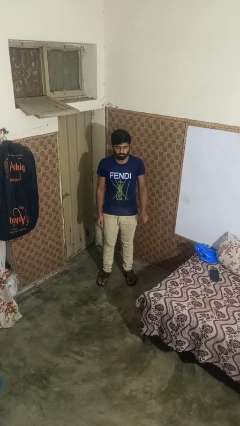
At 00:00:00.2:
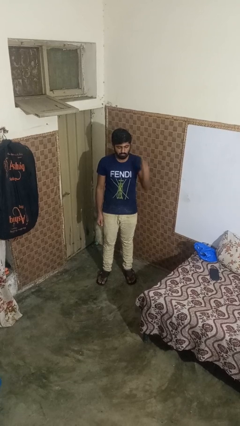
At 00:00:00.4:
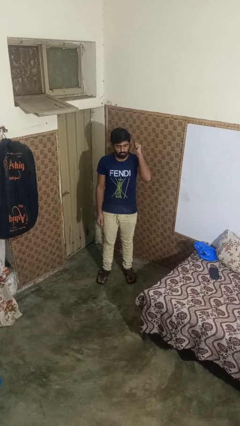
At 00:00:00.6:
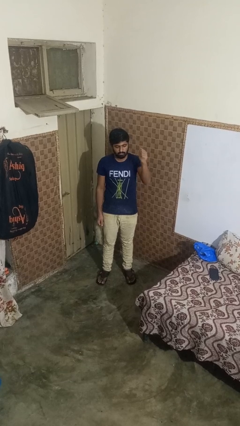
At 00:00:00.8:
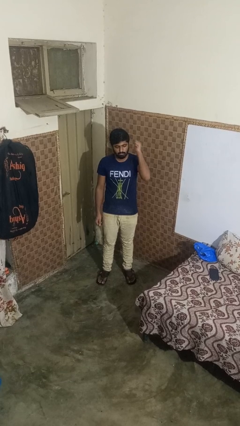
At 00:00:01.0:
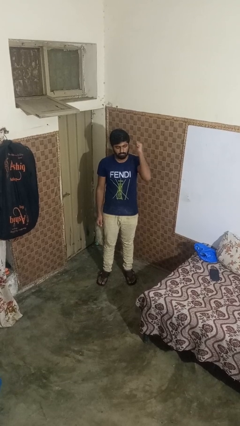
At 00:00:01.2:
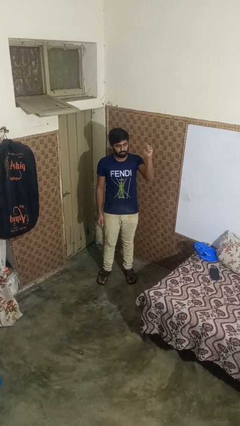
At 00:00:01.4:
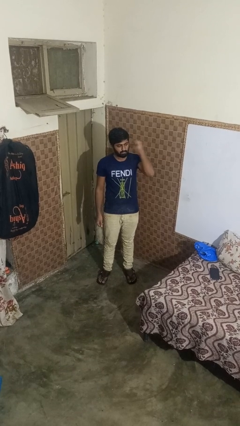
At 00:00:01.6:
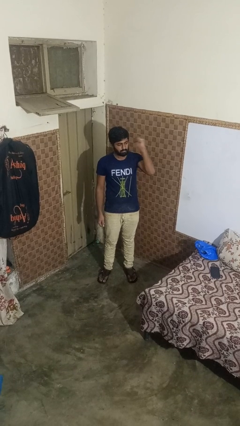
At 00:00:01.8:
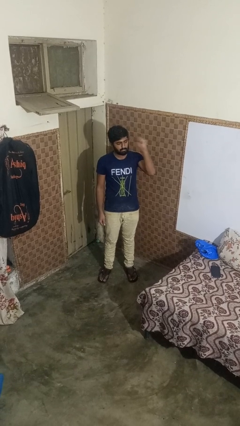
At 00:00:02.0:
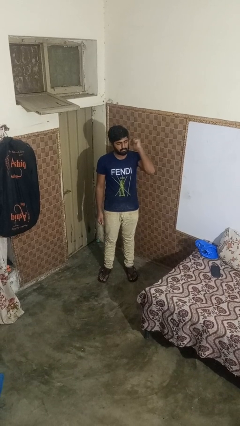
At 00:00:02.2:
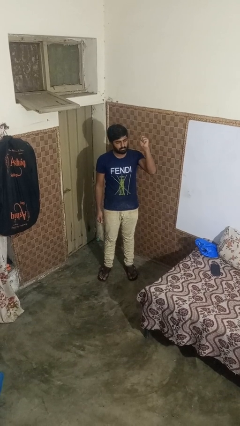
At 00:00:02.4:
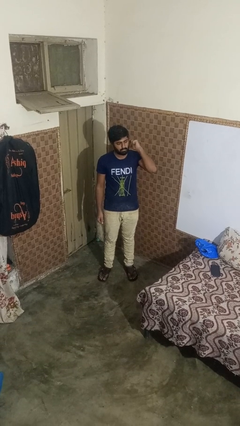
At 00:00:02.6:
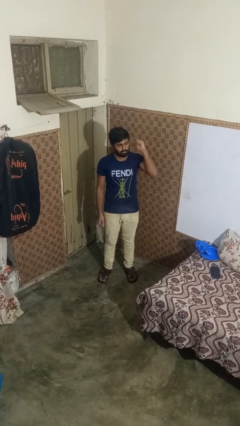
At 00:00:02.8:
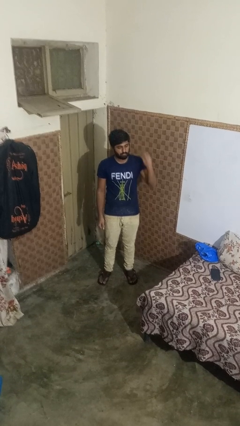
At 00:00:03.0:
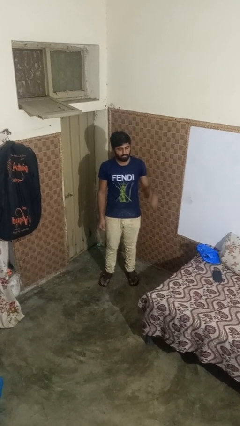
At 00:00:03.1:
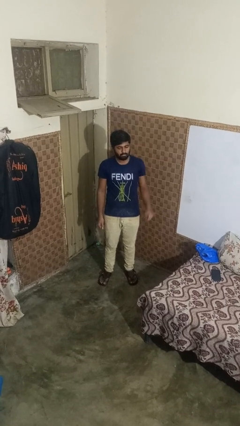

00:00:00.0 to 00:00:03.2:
person gestures behind me

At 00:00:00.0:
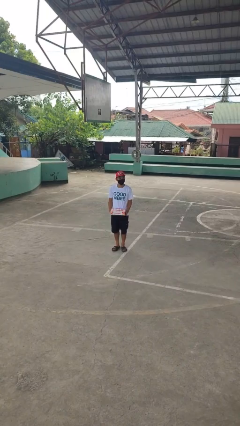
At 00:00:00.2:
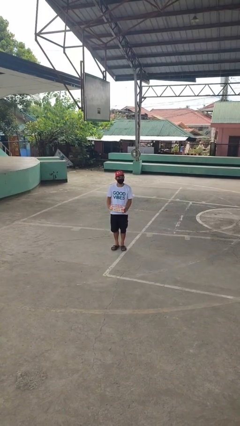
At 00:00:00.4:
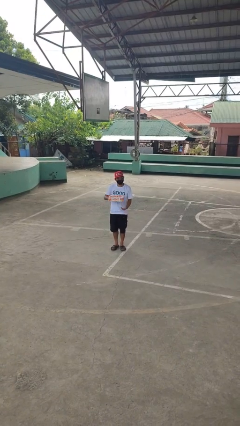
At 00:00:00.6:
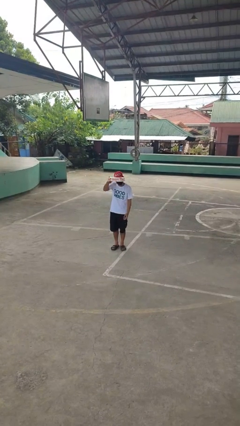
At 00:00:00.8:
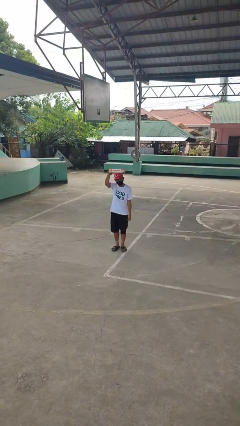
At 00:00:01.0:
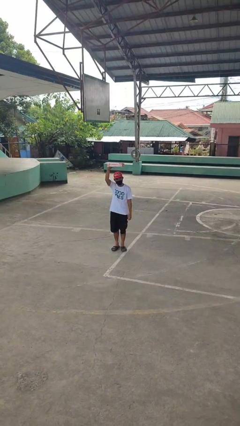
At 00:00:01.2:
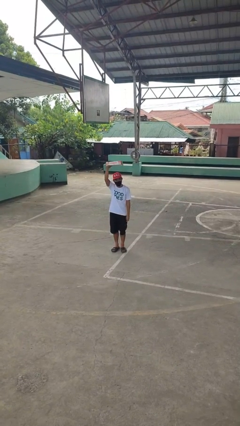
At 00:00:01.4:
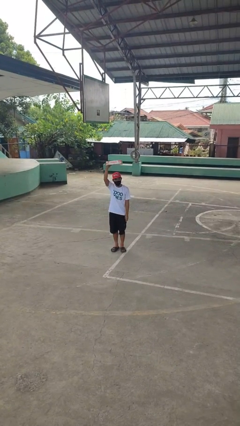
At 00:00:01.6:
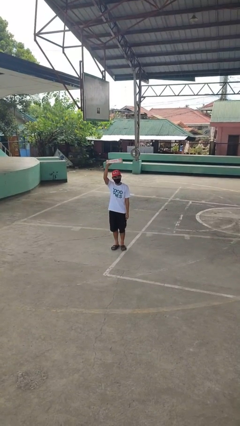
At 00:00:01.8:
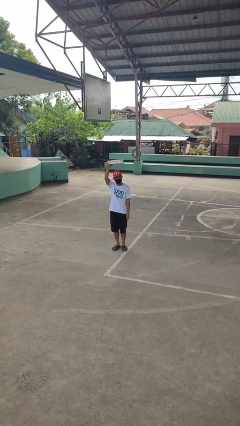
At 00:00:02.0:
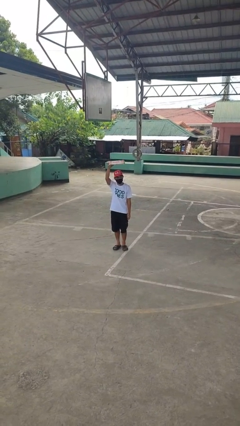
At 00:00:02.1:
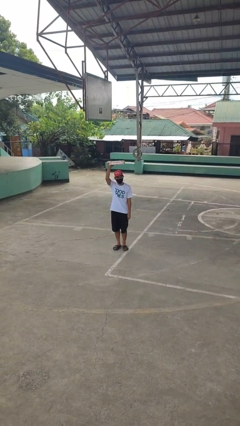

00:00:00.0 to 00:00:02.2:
person holds object above head

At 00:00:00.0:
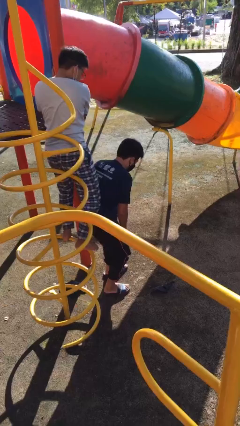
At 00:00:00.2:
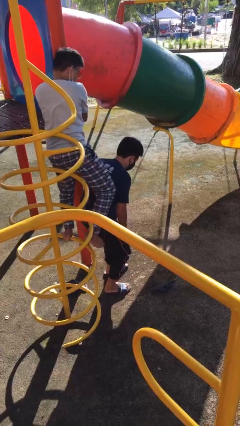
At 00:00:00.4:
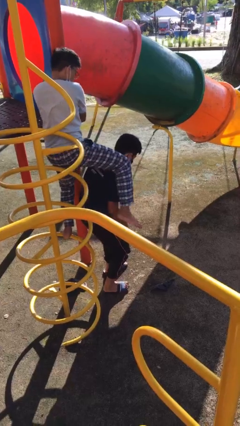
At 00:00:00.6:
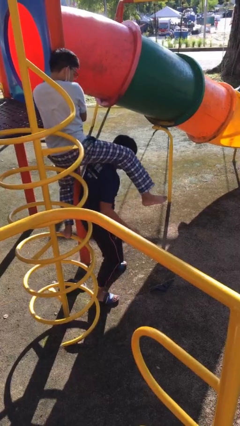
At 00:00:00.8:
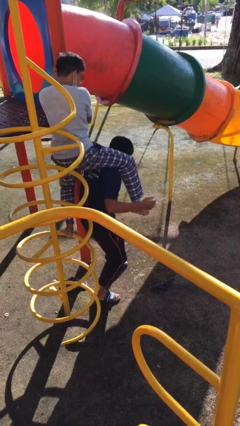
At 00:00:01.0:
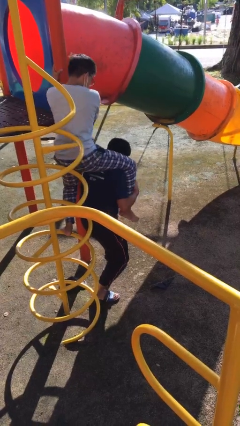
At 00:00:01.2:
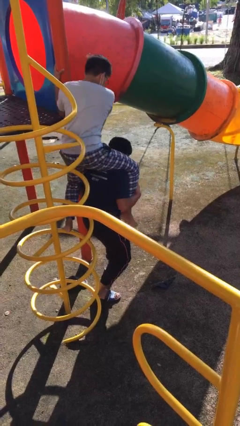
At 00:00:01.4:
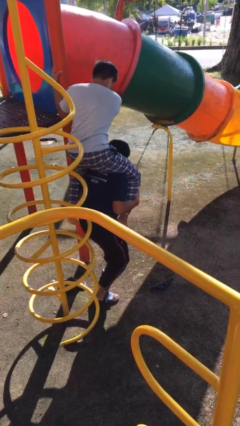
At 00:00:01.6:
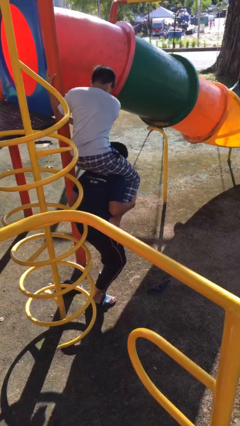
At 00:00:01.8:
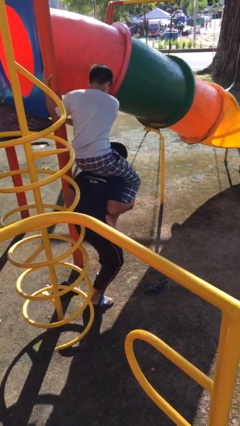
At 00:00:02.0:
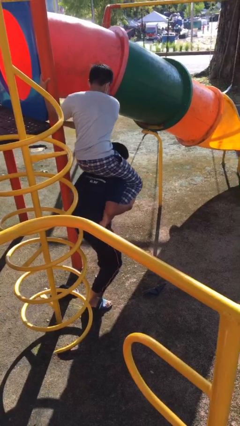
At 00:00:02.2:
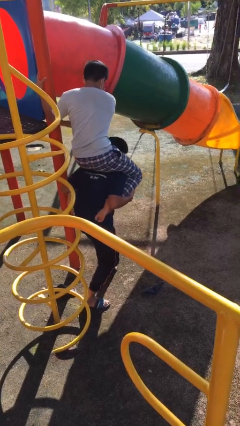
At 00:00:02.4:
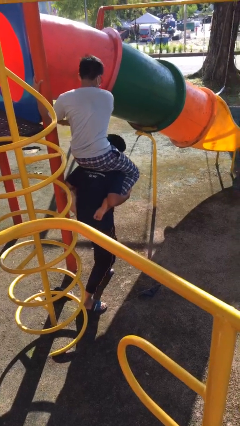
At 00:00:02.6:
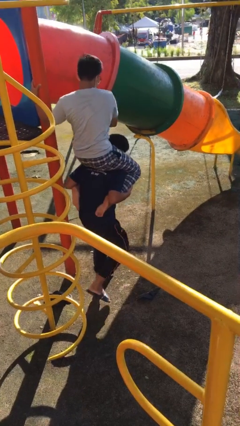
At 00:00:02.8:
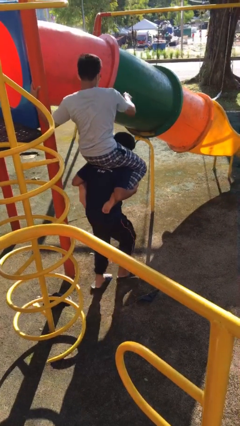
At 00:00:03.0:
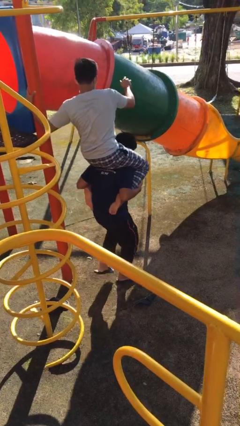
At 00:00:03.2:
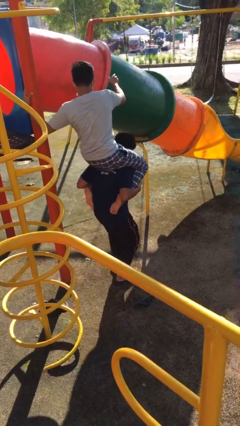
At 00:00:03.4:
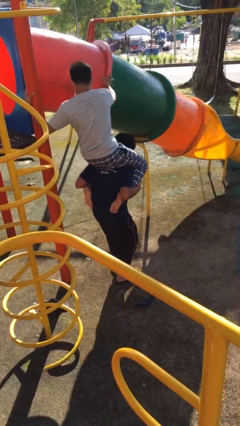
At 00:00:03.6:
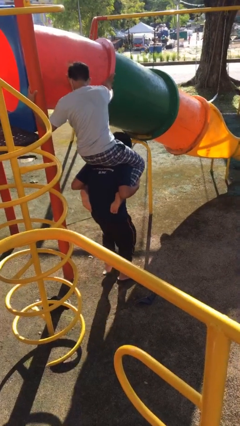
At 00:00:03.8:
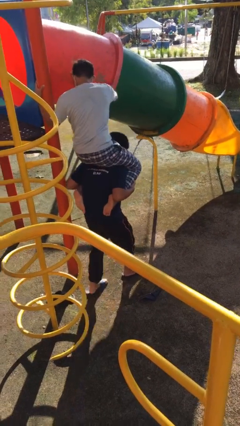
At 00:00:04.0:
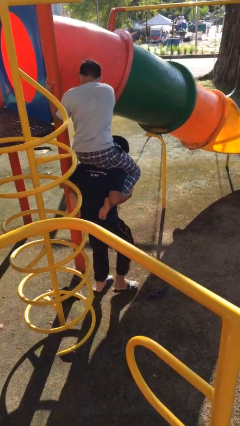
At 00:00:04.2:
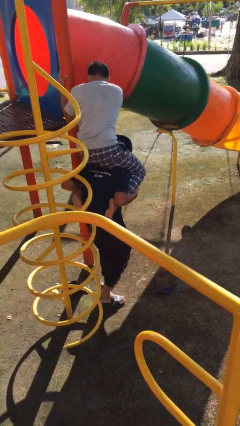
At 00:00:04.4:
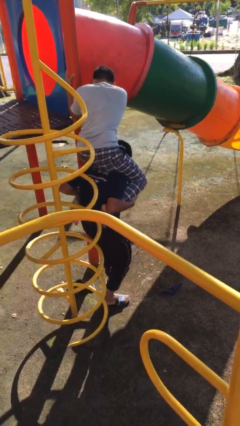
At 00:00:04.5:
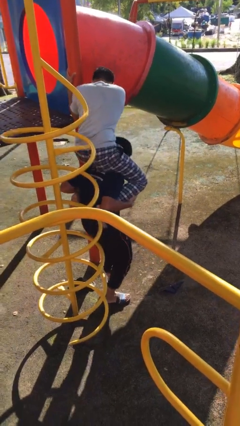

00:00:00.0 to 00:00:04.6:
person carries person on shoulders

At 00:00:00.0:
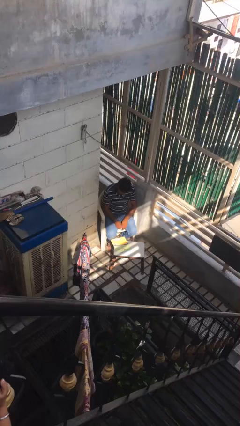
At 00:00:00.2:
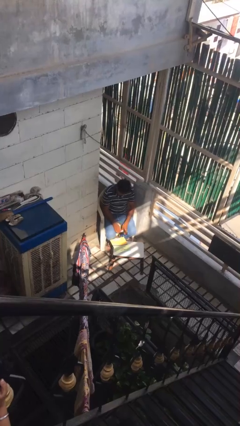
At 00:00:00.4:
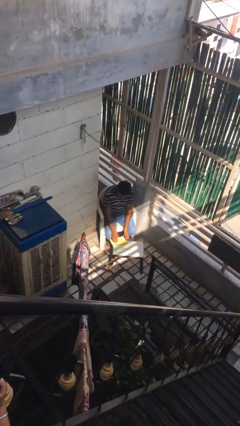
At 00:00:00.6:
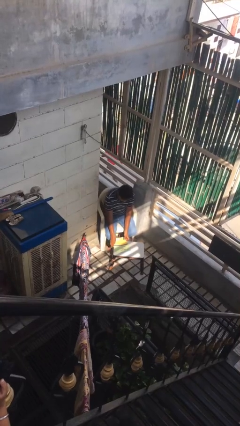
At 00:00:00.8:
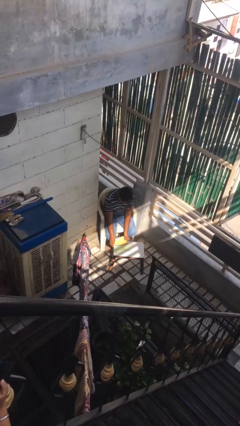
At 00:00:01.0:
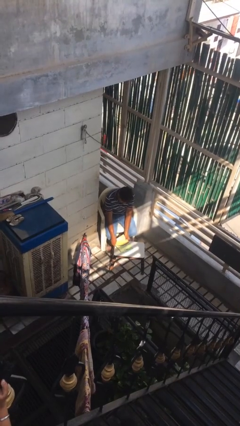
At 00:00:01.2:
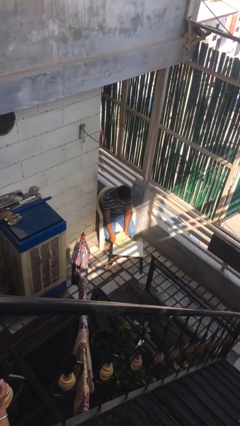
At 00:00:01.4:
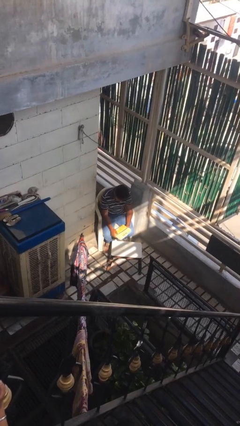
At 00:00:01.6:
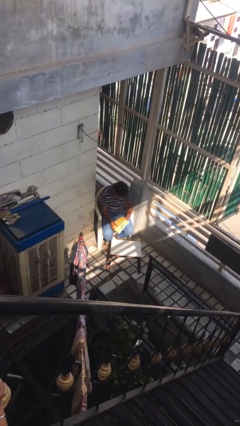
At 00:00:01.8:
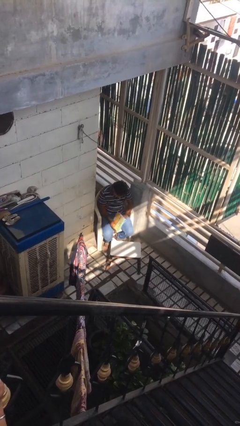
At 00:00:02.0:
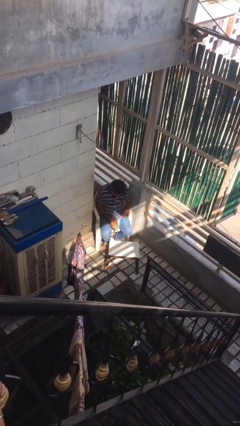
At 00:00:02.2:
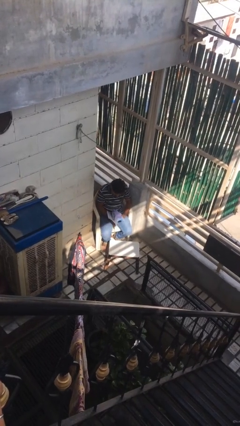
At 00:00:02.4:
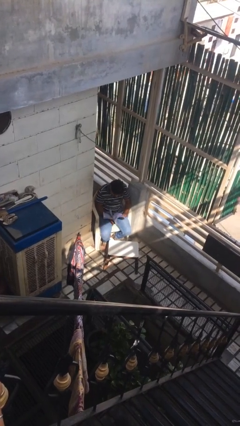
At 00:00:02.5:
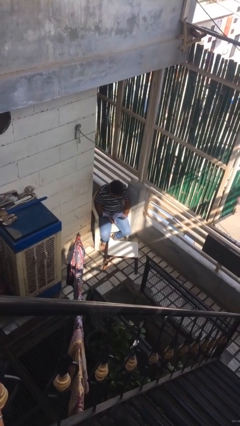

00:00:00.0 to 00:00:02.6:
person picks up object from table

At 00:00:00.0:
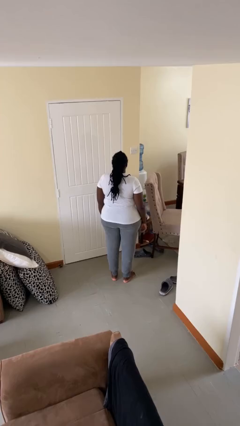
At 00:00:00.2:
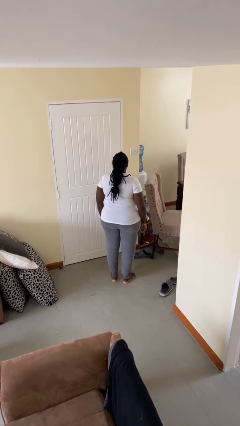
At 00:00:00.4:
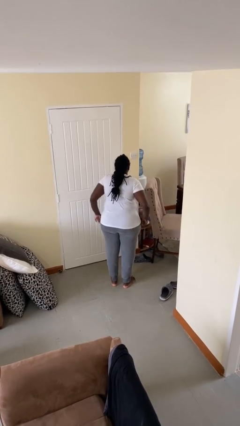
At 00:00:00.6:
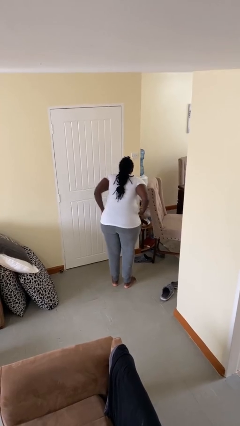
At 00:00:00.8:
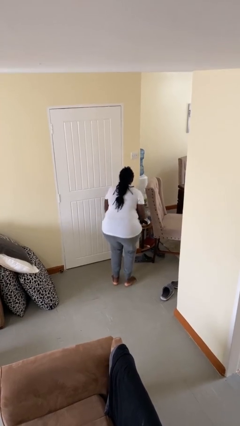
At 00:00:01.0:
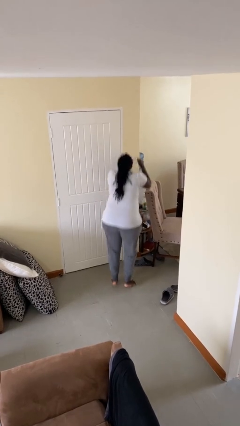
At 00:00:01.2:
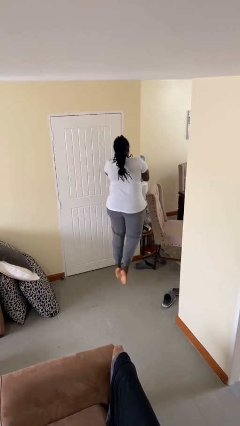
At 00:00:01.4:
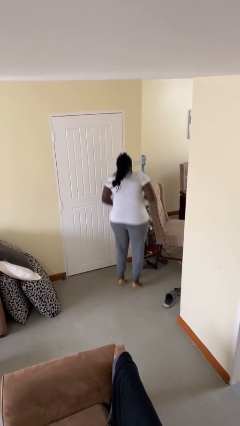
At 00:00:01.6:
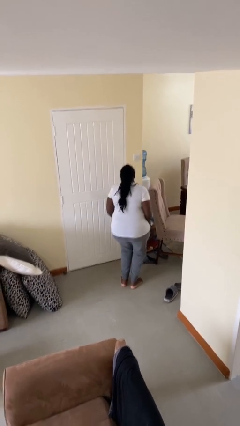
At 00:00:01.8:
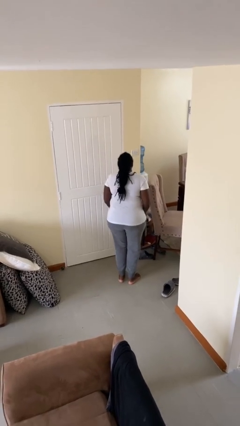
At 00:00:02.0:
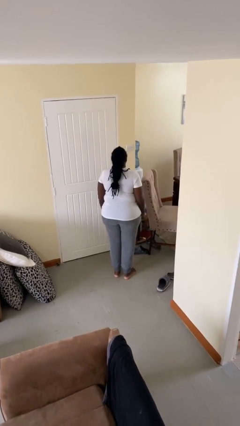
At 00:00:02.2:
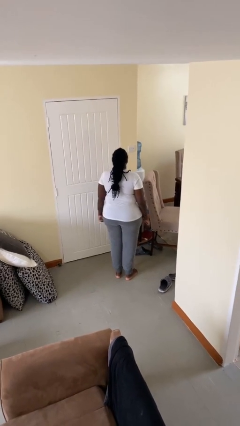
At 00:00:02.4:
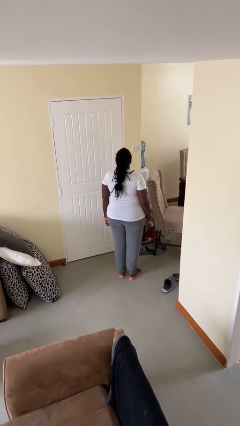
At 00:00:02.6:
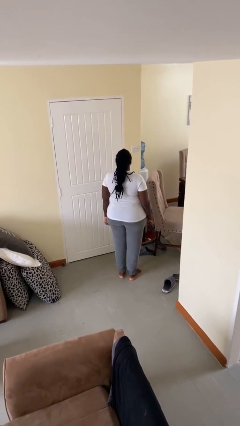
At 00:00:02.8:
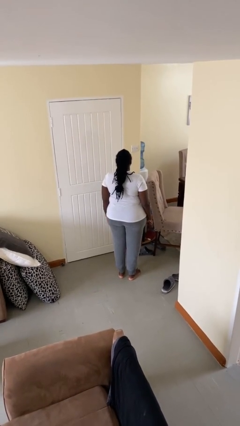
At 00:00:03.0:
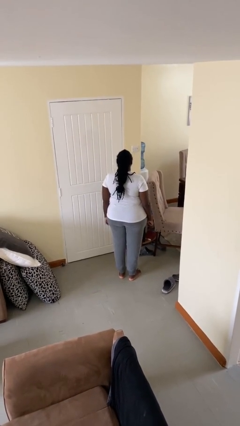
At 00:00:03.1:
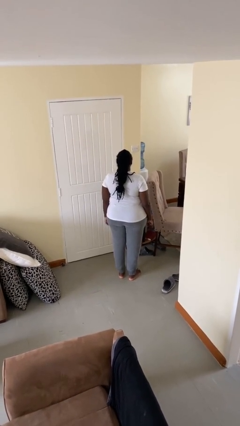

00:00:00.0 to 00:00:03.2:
person jumps

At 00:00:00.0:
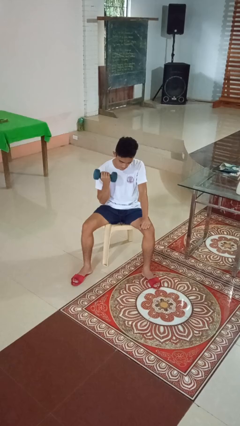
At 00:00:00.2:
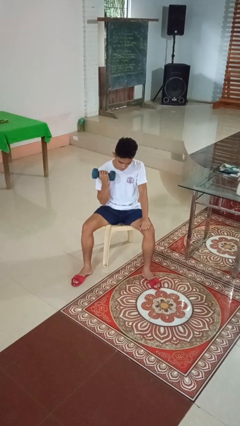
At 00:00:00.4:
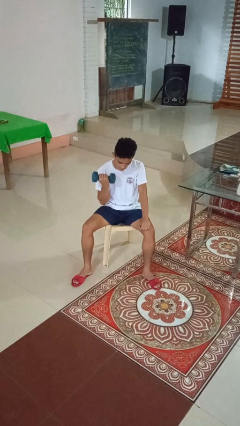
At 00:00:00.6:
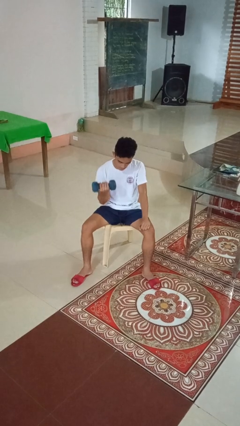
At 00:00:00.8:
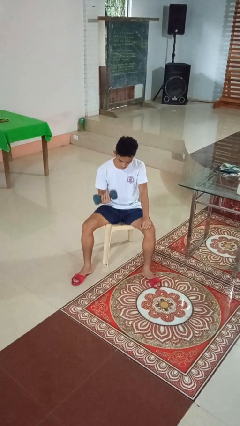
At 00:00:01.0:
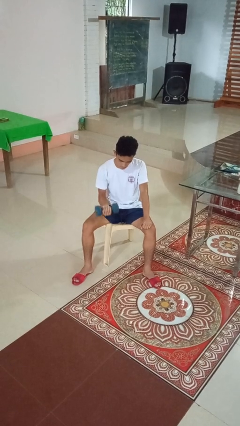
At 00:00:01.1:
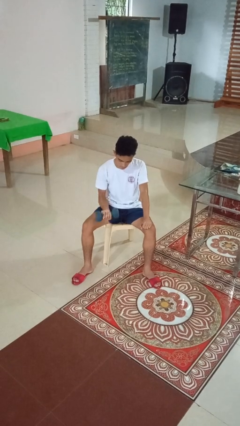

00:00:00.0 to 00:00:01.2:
person lifts dumbbells
